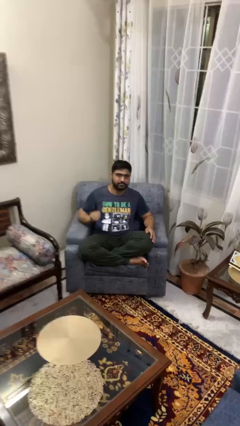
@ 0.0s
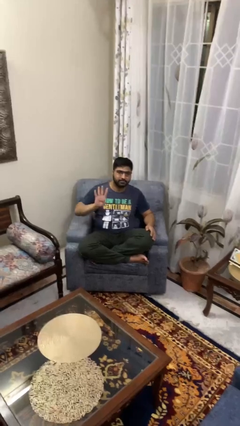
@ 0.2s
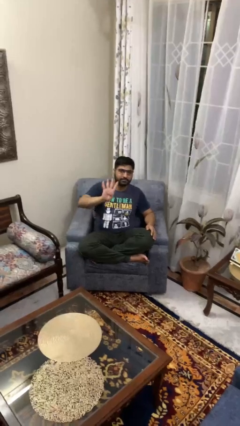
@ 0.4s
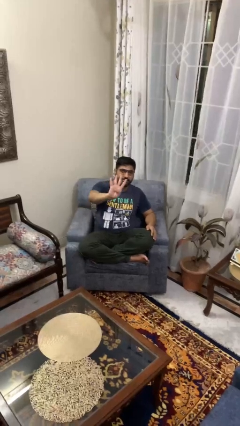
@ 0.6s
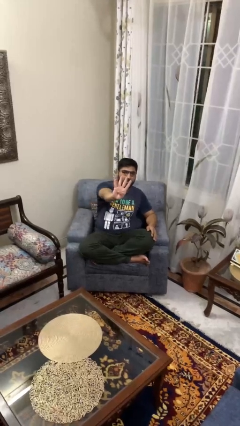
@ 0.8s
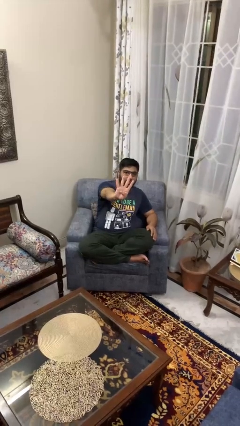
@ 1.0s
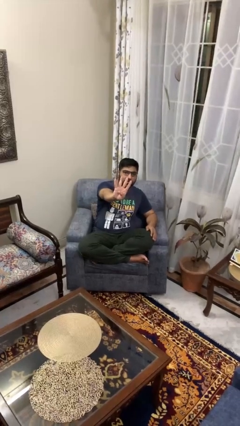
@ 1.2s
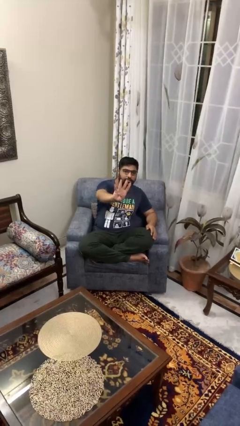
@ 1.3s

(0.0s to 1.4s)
person gestures number four

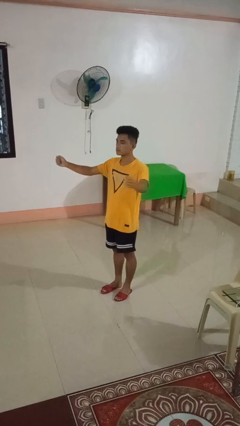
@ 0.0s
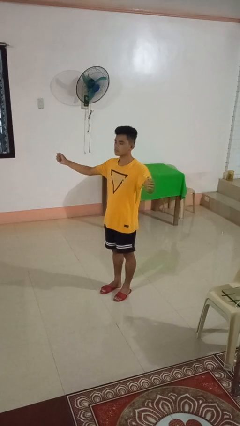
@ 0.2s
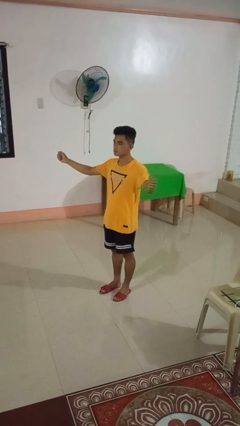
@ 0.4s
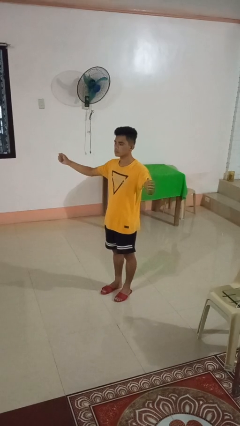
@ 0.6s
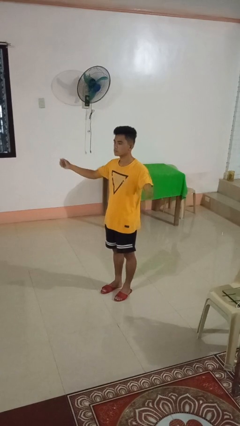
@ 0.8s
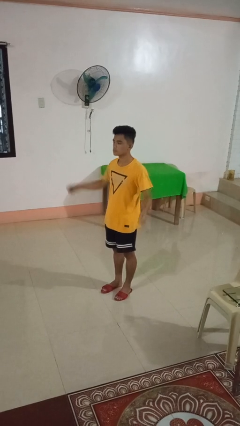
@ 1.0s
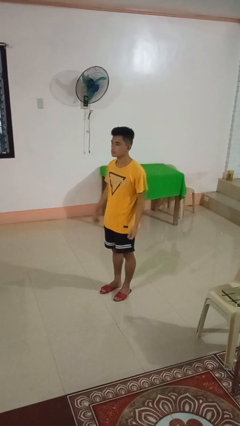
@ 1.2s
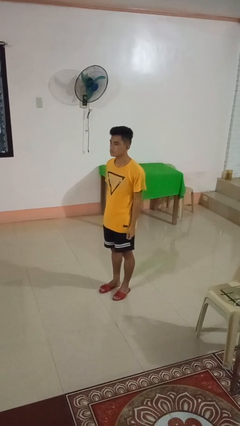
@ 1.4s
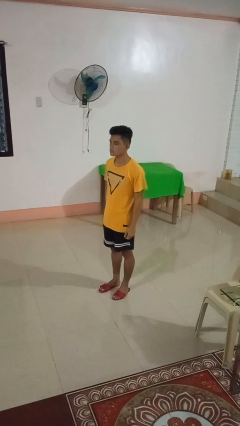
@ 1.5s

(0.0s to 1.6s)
person gestures zoom out

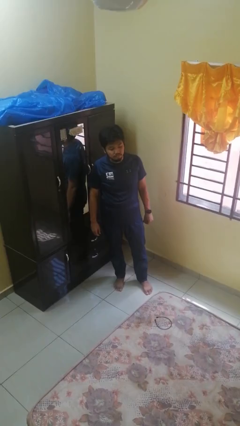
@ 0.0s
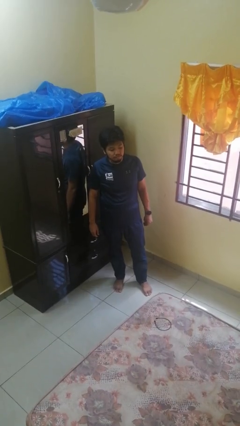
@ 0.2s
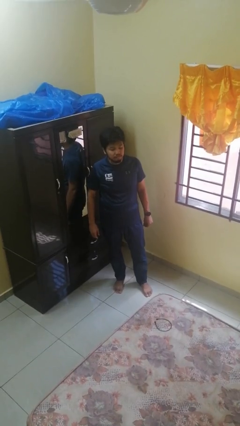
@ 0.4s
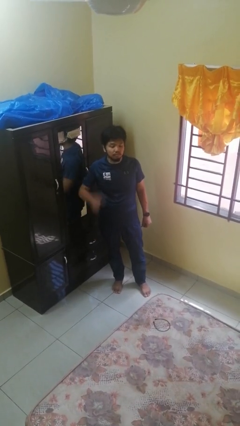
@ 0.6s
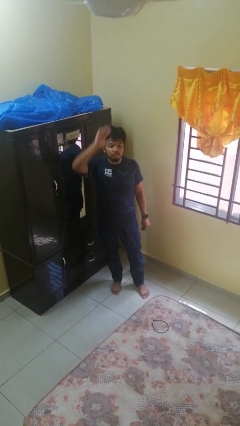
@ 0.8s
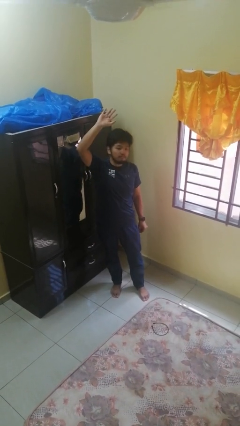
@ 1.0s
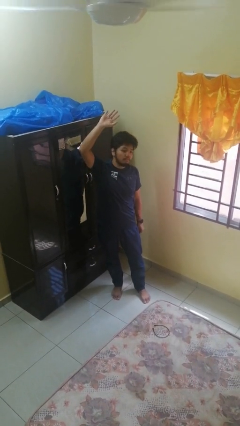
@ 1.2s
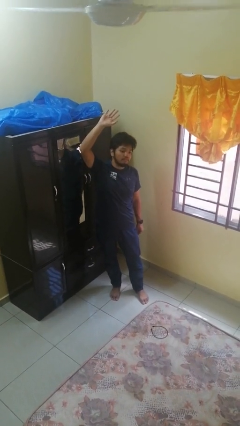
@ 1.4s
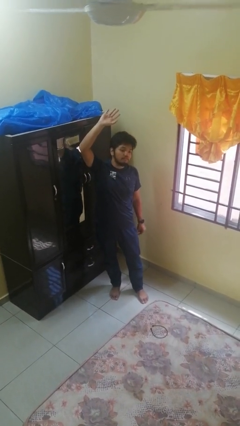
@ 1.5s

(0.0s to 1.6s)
person gestures raise hand

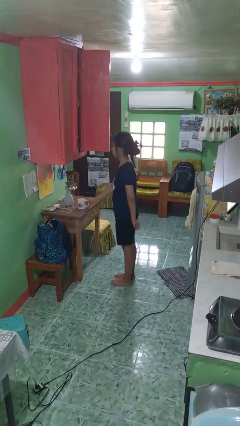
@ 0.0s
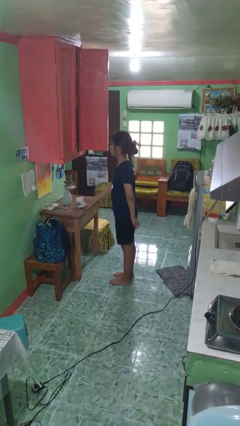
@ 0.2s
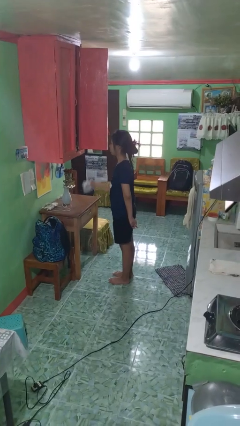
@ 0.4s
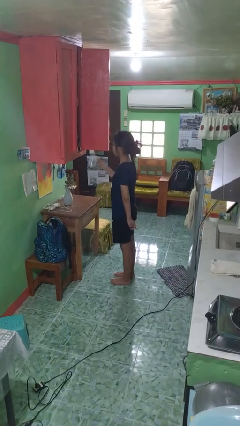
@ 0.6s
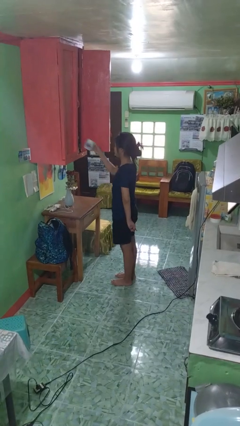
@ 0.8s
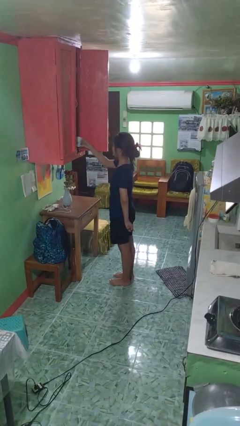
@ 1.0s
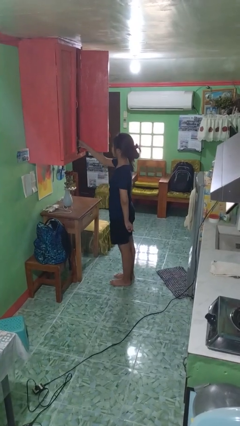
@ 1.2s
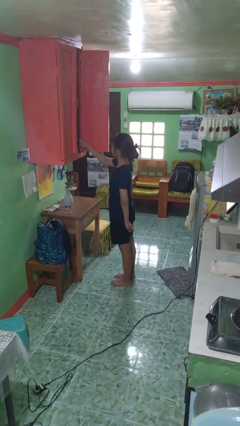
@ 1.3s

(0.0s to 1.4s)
person puts object in cabinet

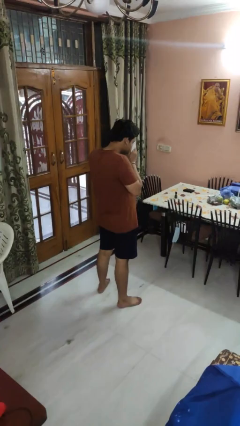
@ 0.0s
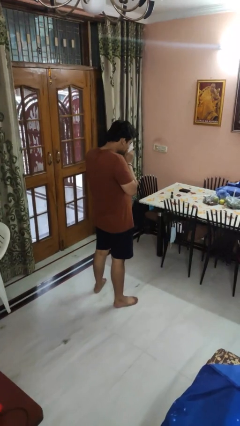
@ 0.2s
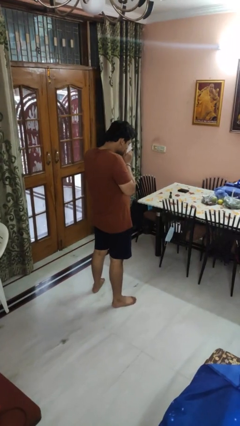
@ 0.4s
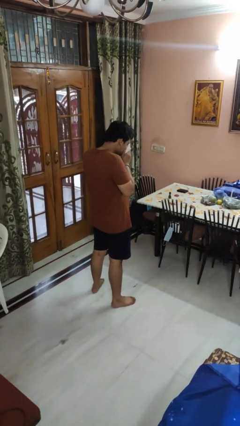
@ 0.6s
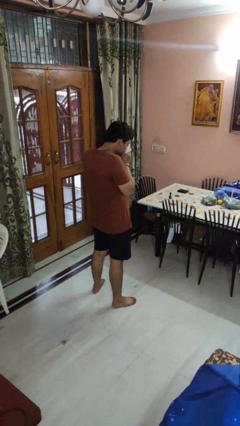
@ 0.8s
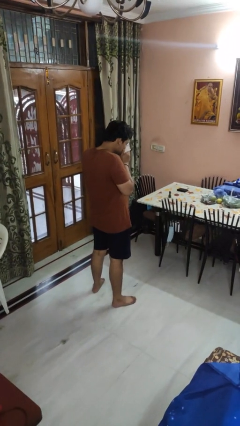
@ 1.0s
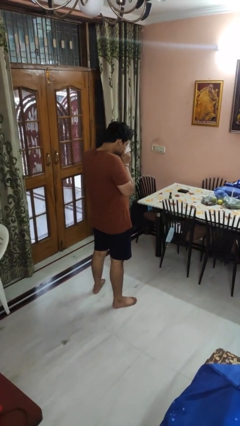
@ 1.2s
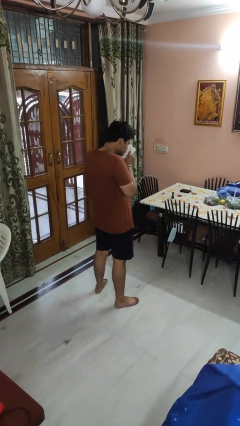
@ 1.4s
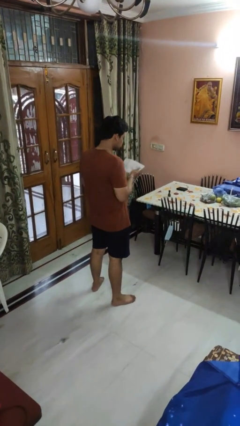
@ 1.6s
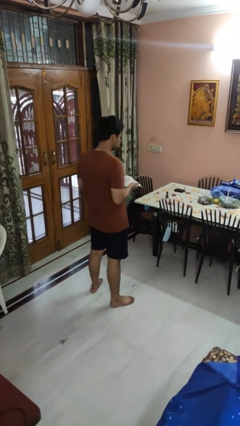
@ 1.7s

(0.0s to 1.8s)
person blows nose

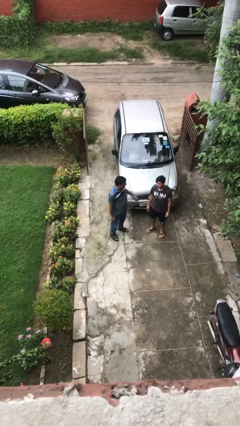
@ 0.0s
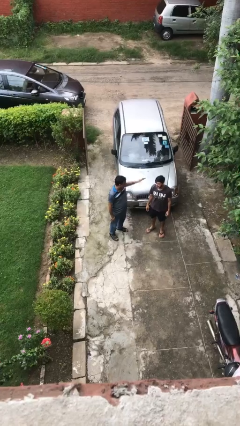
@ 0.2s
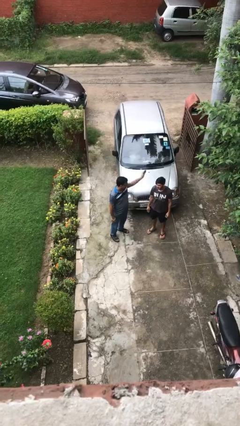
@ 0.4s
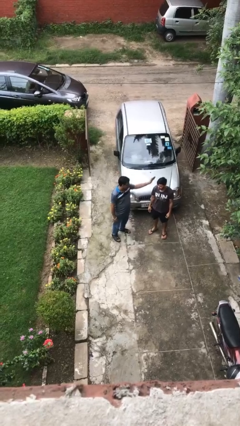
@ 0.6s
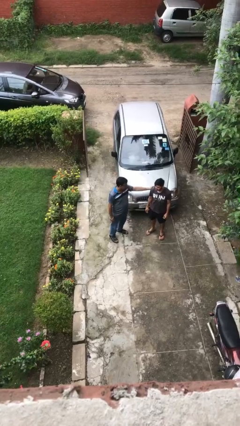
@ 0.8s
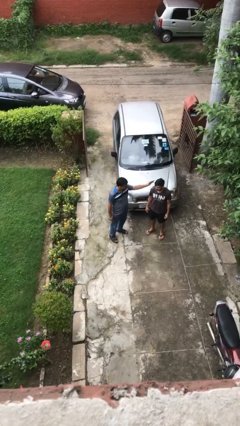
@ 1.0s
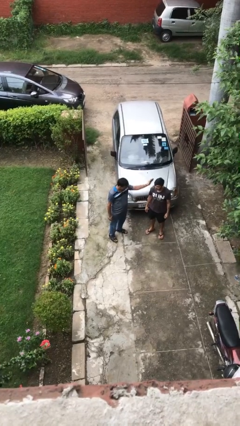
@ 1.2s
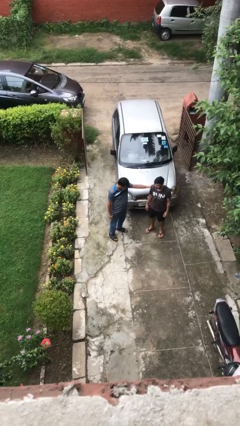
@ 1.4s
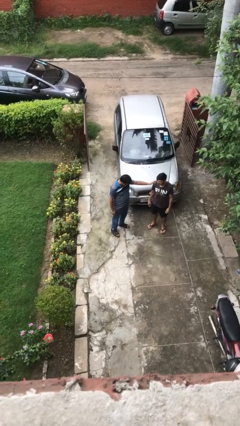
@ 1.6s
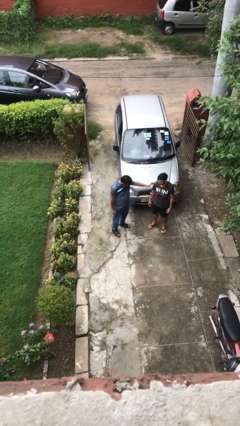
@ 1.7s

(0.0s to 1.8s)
person pounds shoulders of person

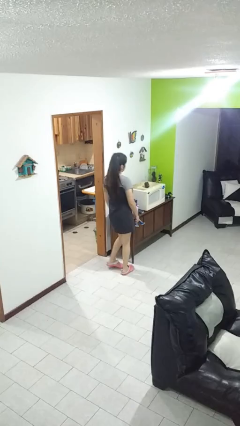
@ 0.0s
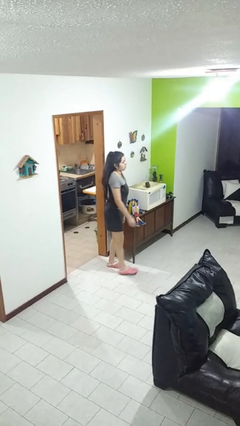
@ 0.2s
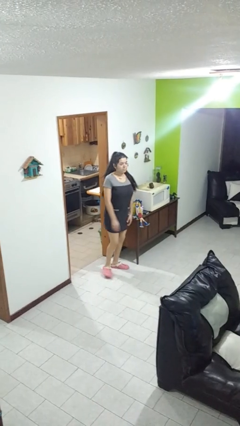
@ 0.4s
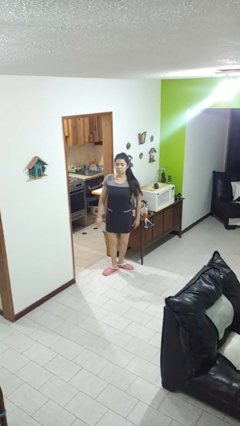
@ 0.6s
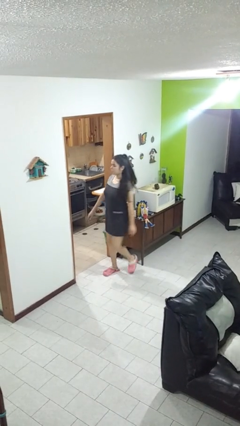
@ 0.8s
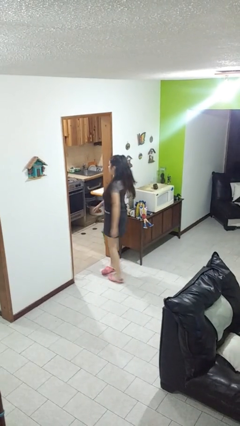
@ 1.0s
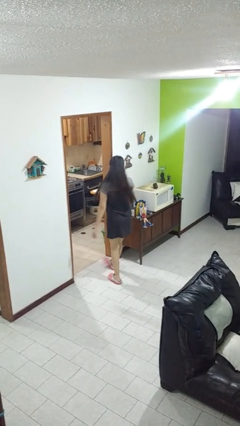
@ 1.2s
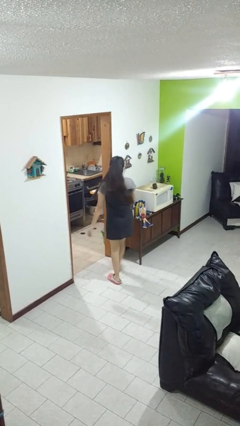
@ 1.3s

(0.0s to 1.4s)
person twirls

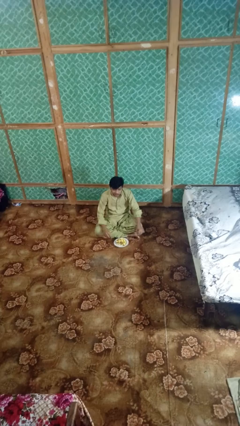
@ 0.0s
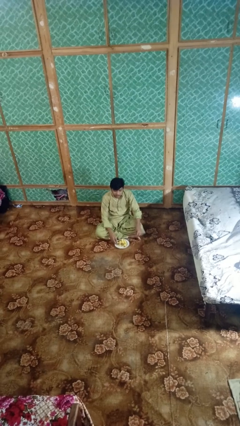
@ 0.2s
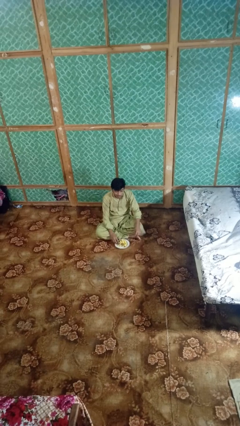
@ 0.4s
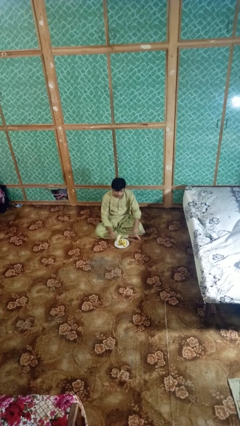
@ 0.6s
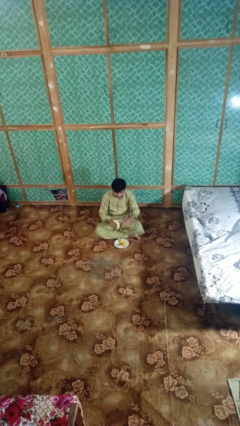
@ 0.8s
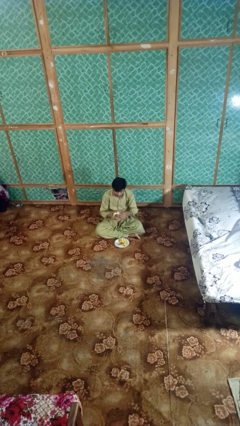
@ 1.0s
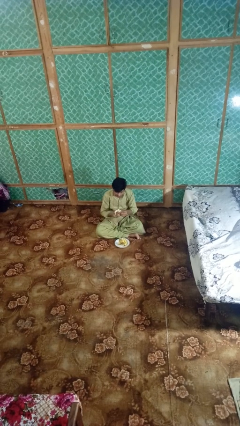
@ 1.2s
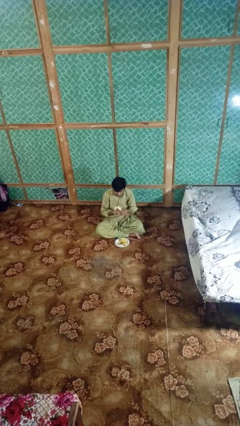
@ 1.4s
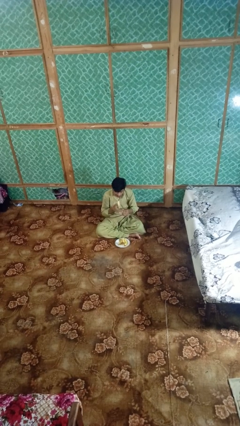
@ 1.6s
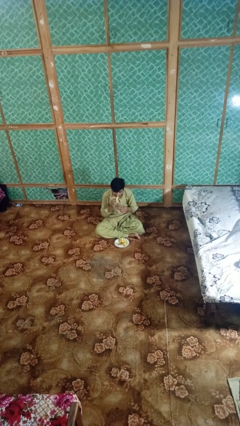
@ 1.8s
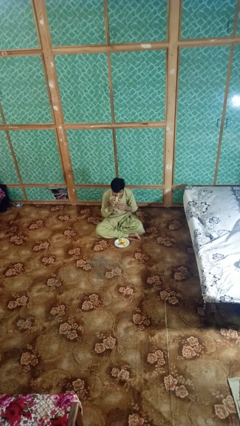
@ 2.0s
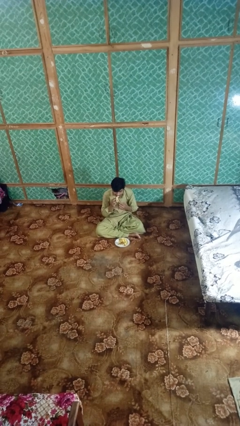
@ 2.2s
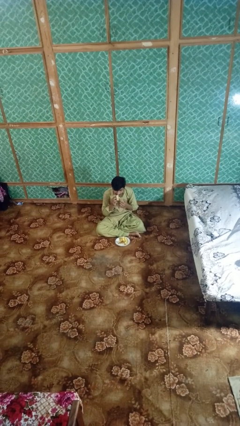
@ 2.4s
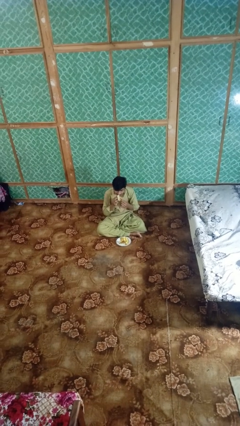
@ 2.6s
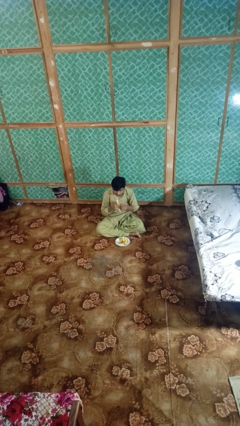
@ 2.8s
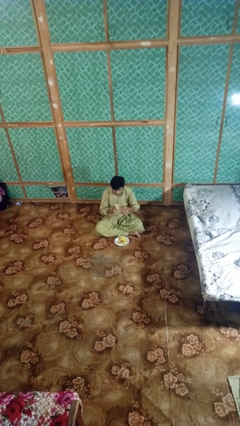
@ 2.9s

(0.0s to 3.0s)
person eats banana

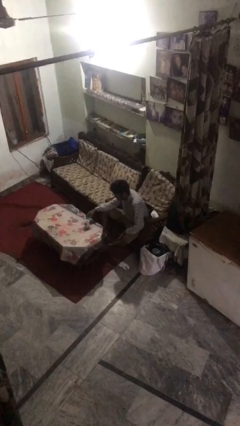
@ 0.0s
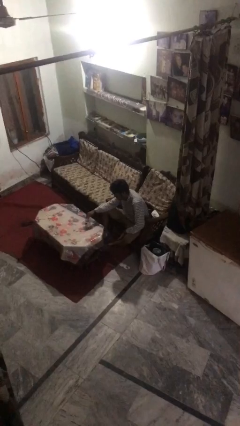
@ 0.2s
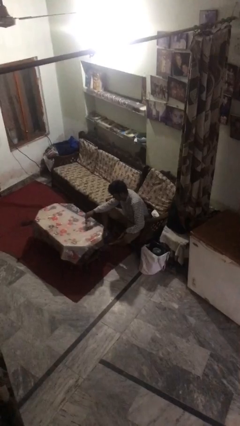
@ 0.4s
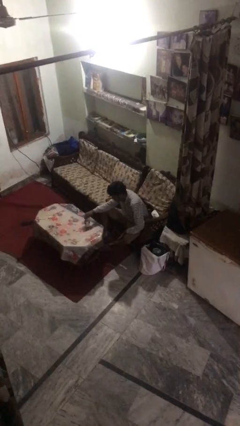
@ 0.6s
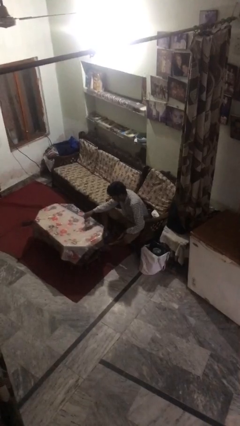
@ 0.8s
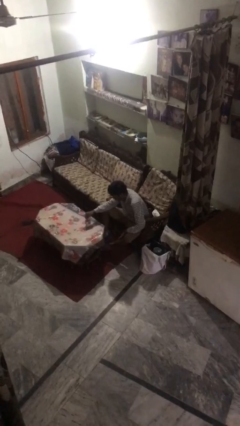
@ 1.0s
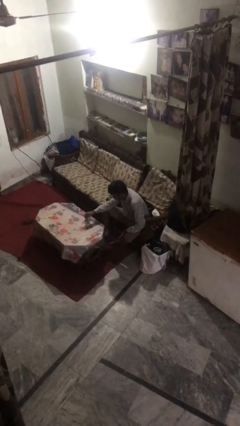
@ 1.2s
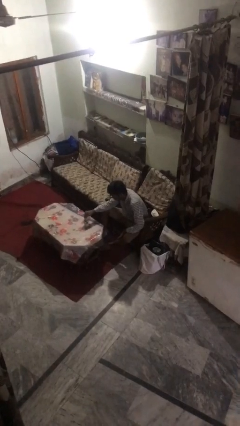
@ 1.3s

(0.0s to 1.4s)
person stirs mug

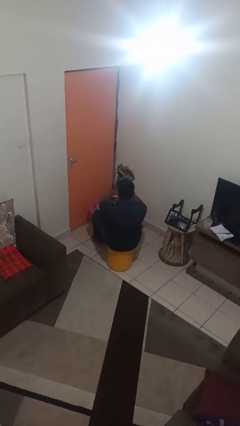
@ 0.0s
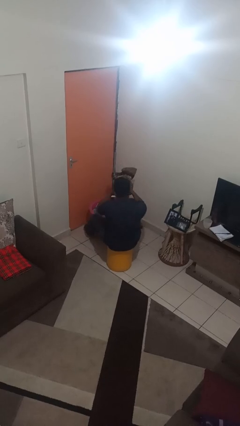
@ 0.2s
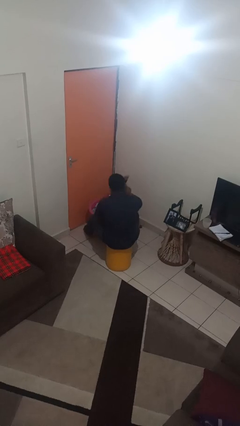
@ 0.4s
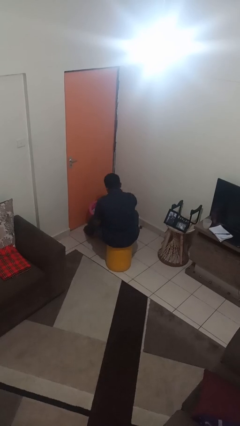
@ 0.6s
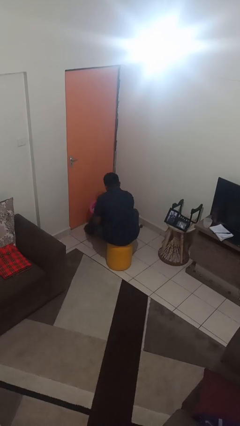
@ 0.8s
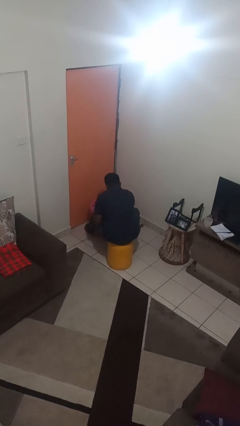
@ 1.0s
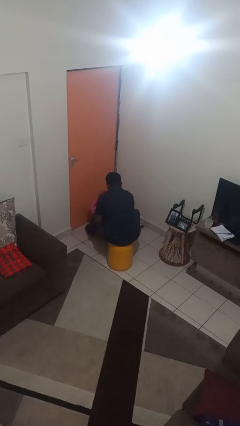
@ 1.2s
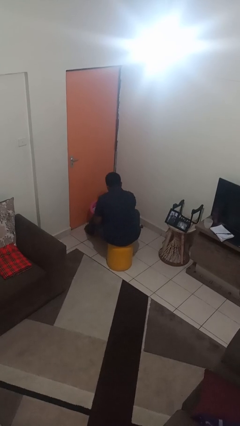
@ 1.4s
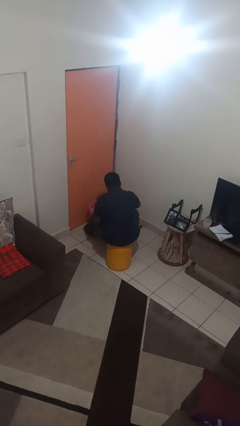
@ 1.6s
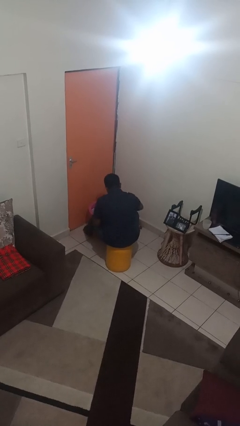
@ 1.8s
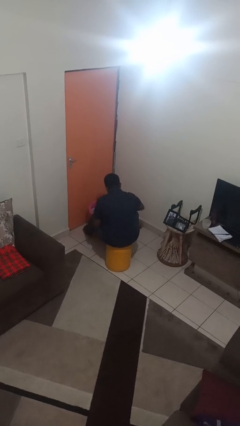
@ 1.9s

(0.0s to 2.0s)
person puts object into basket
